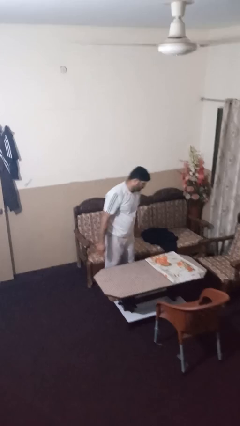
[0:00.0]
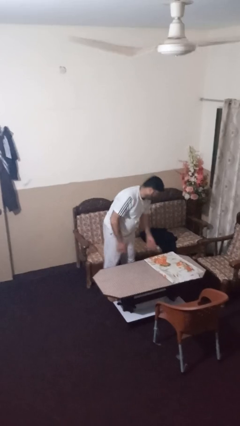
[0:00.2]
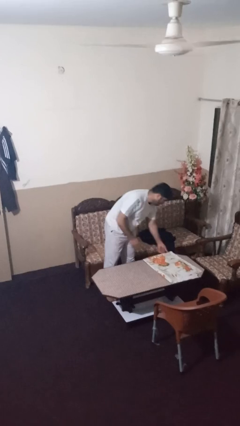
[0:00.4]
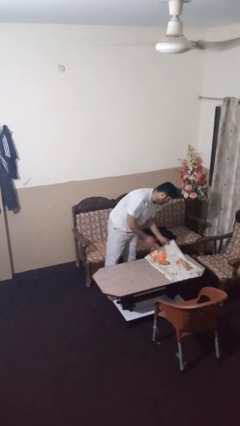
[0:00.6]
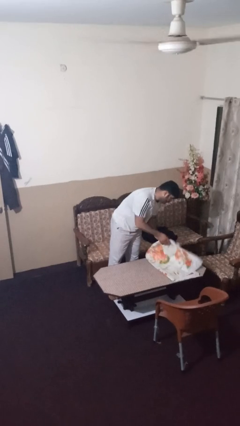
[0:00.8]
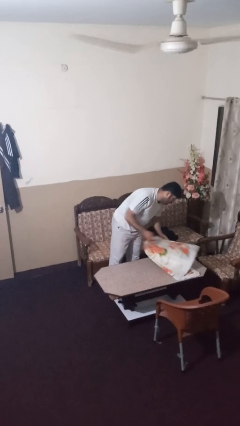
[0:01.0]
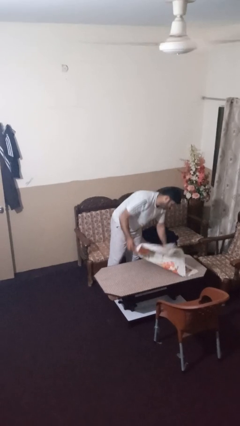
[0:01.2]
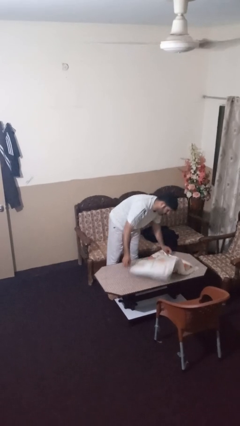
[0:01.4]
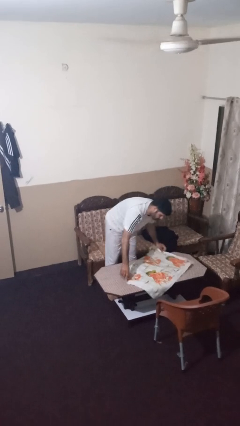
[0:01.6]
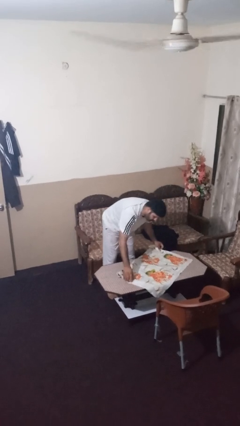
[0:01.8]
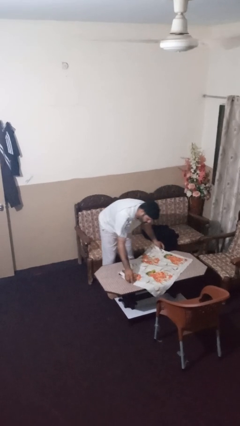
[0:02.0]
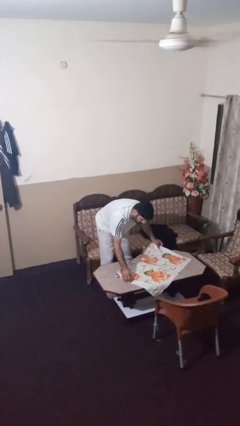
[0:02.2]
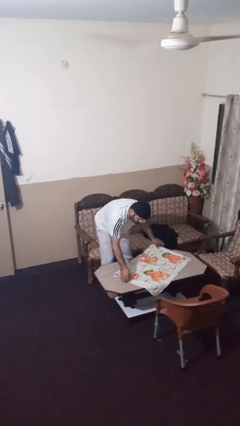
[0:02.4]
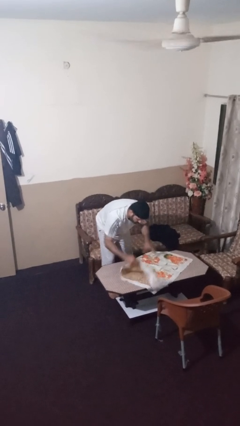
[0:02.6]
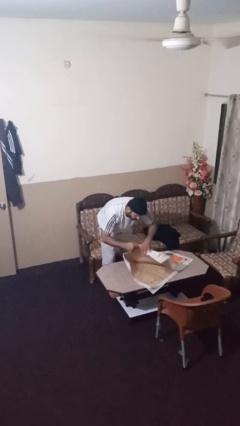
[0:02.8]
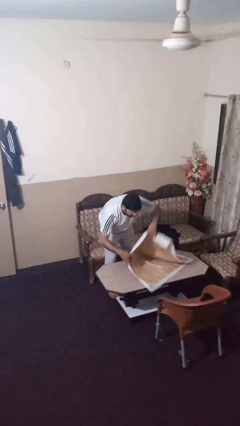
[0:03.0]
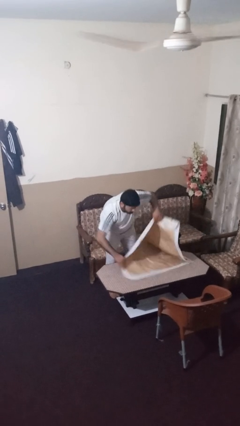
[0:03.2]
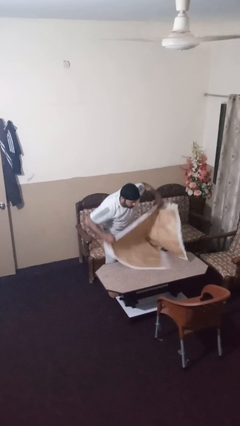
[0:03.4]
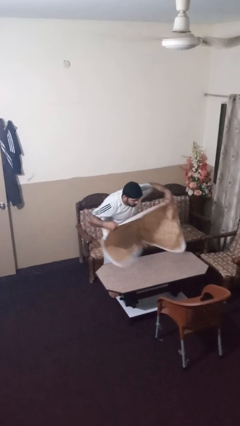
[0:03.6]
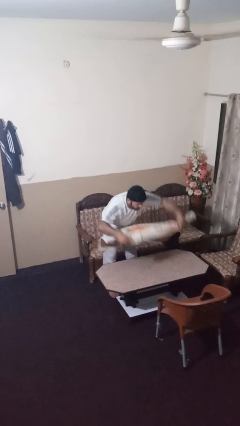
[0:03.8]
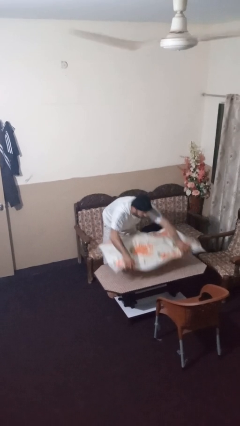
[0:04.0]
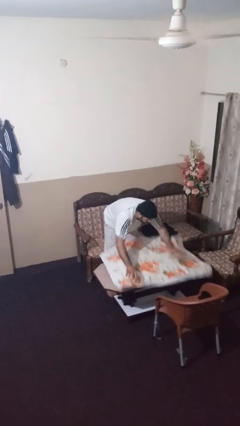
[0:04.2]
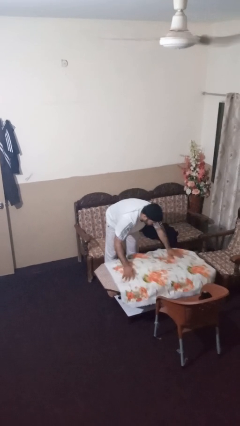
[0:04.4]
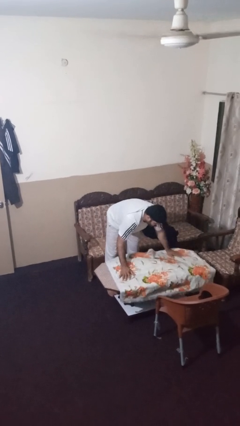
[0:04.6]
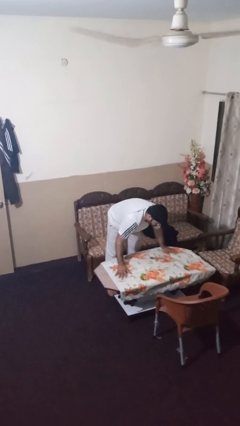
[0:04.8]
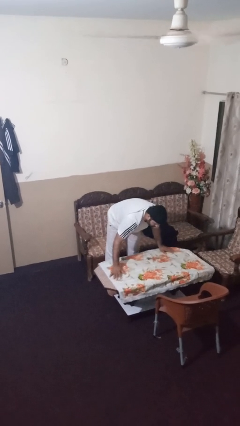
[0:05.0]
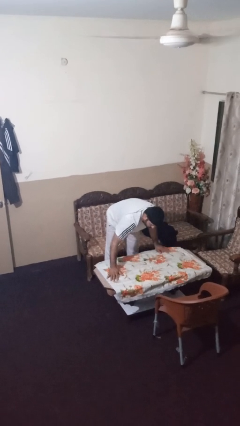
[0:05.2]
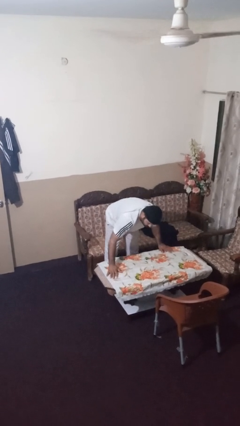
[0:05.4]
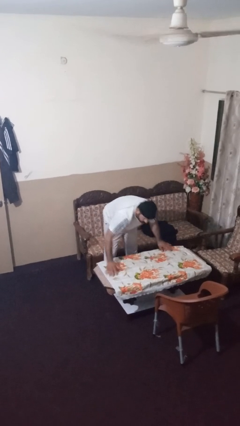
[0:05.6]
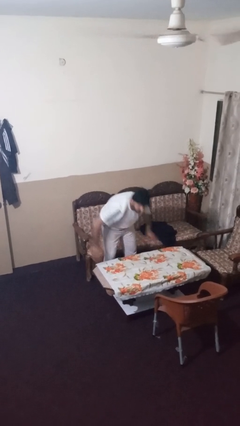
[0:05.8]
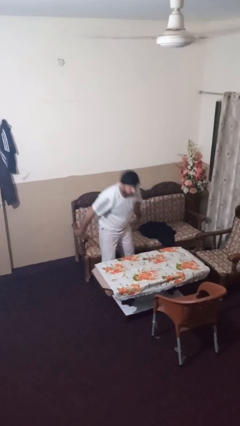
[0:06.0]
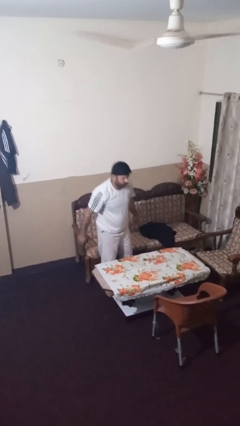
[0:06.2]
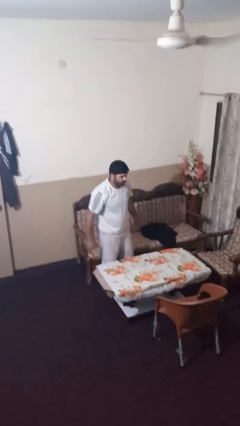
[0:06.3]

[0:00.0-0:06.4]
person spreads tablecloth

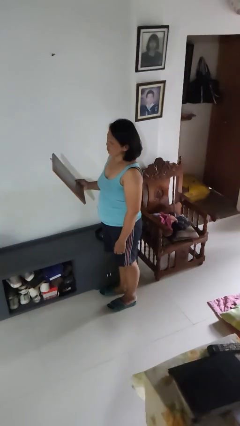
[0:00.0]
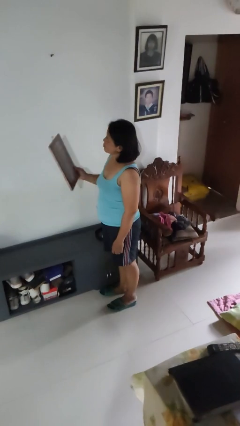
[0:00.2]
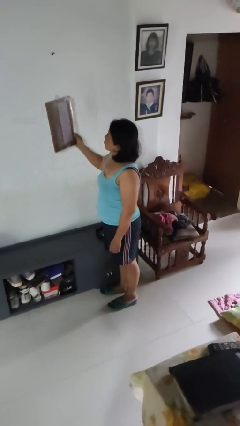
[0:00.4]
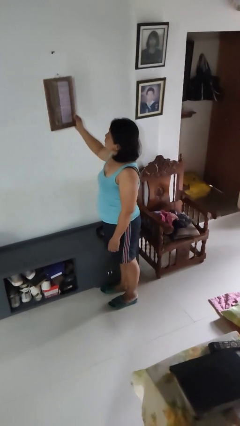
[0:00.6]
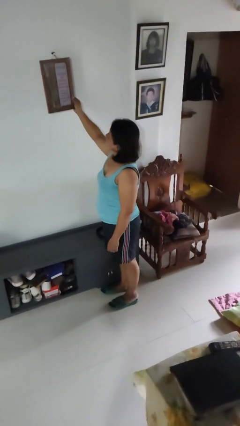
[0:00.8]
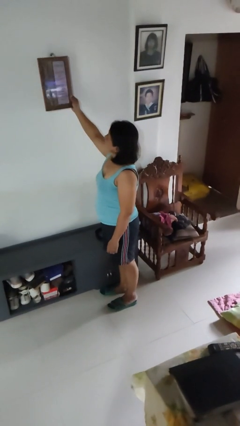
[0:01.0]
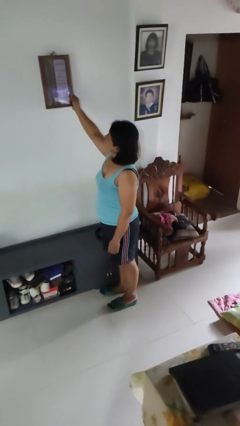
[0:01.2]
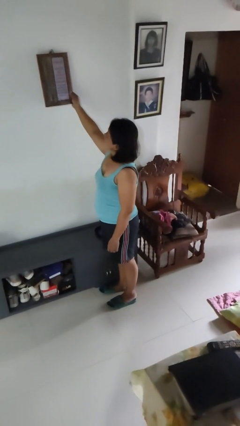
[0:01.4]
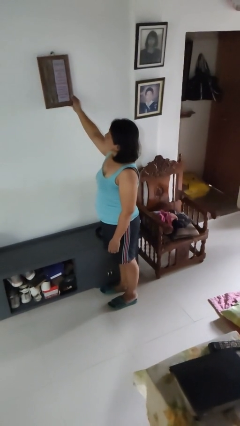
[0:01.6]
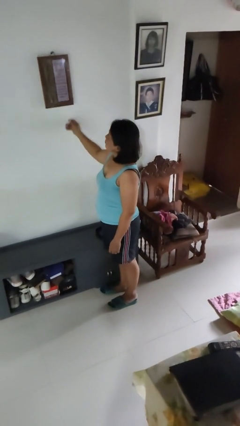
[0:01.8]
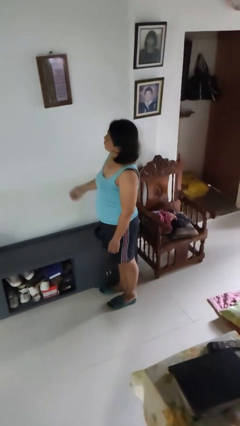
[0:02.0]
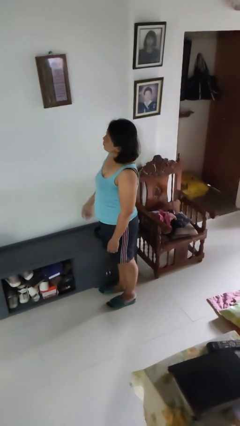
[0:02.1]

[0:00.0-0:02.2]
person puts up picture frame

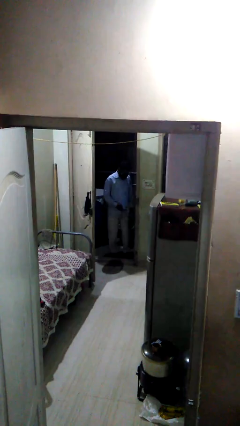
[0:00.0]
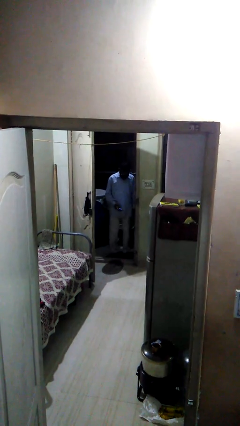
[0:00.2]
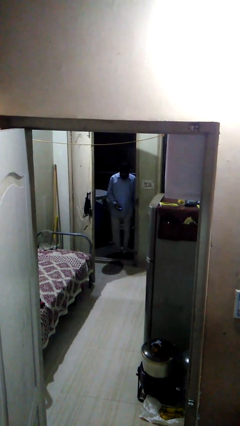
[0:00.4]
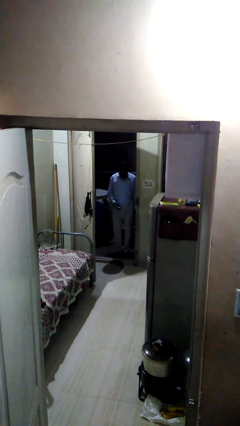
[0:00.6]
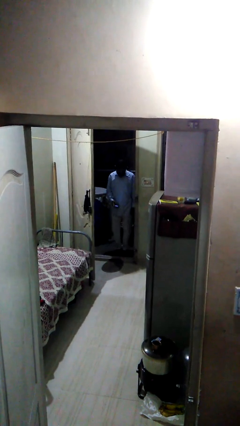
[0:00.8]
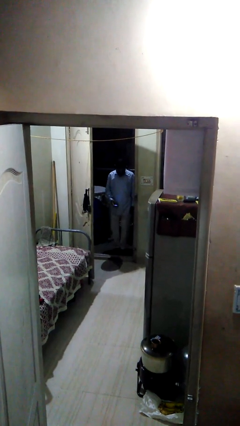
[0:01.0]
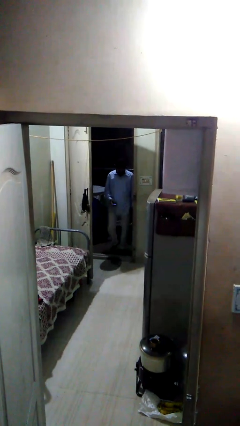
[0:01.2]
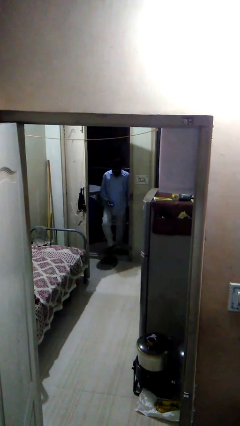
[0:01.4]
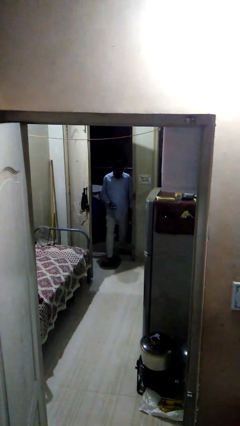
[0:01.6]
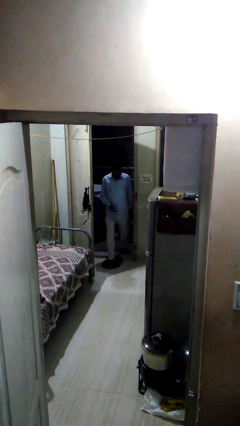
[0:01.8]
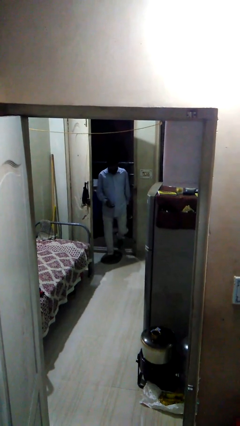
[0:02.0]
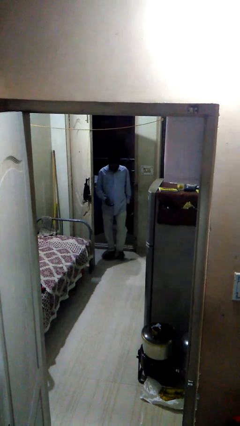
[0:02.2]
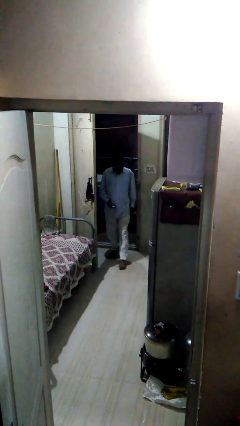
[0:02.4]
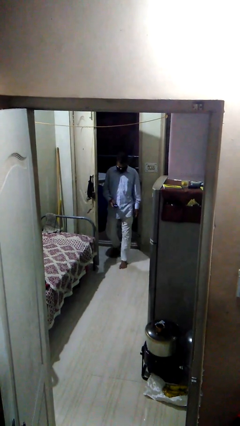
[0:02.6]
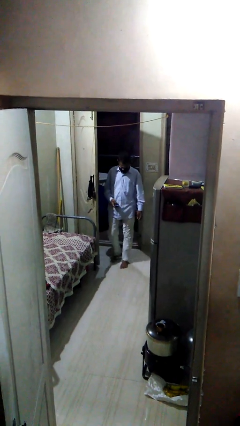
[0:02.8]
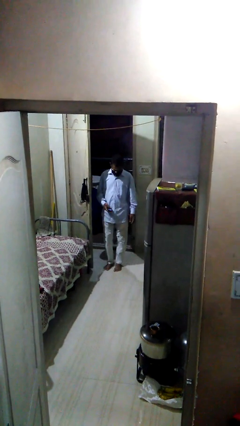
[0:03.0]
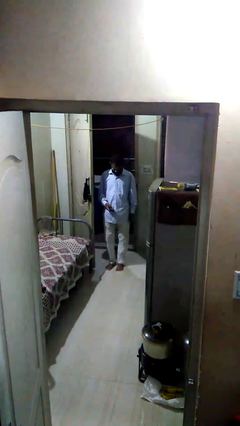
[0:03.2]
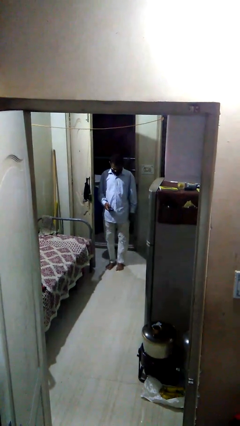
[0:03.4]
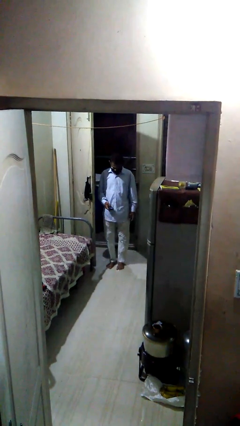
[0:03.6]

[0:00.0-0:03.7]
person enters scene through structure

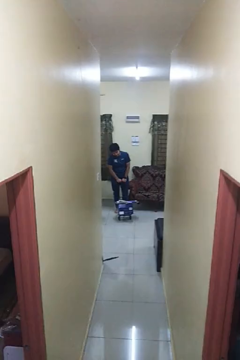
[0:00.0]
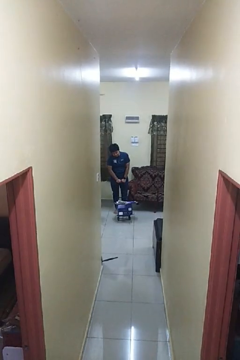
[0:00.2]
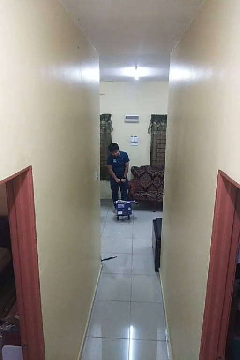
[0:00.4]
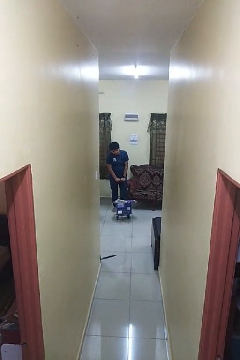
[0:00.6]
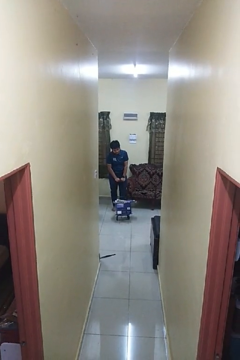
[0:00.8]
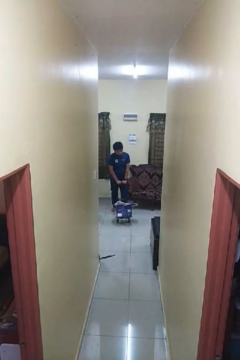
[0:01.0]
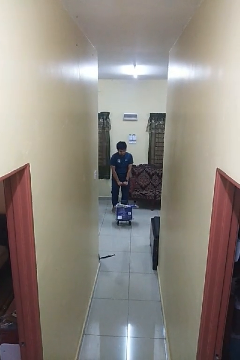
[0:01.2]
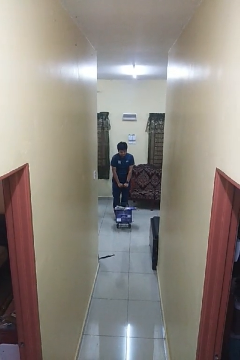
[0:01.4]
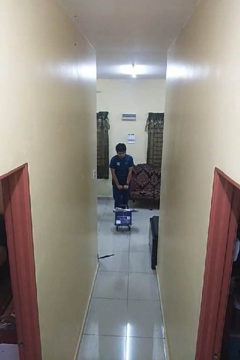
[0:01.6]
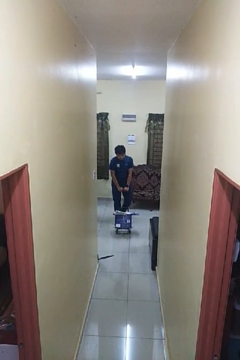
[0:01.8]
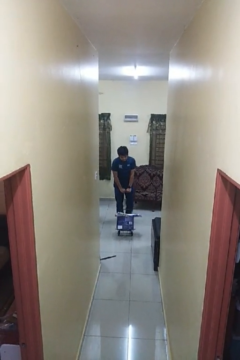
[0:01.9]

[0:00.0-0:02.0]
person pushes wheeled cart

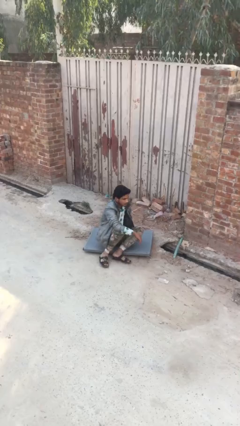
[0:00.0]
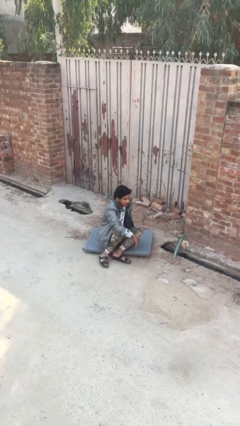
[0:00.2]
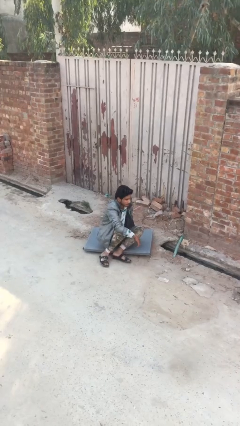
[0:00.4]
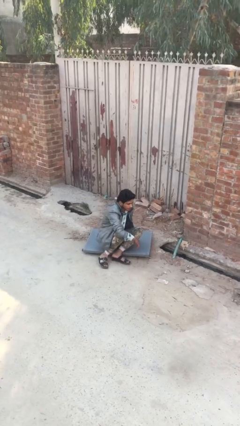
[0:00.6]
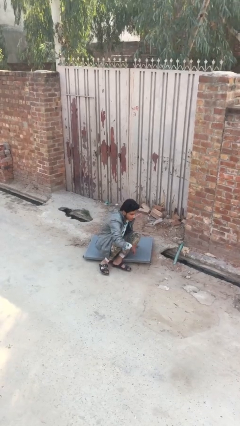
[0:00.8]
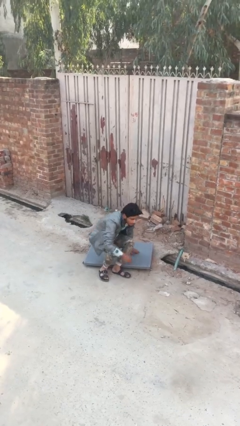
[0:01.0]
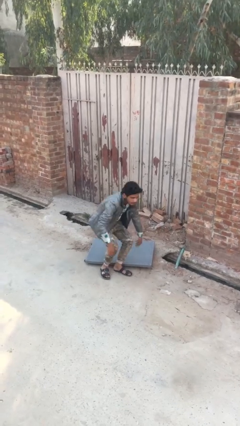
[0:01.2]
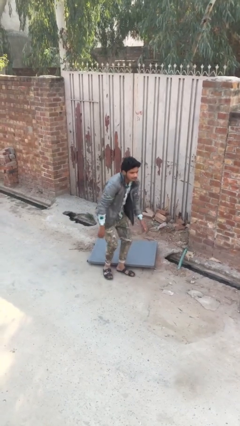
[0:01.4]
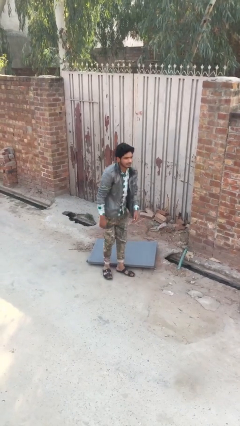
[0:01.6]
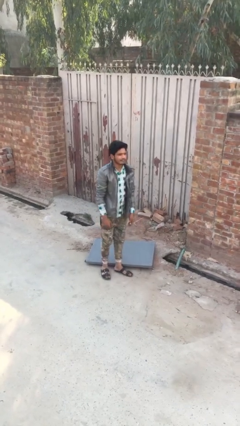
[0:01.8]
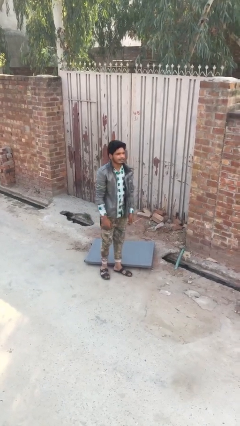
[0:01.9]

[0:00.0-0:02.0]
person stands up

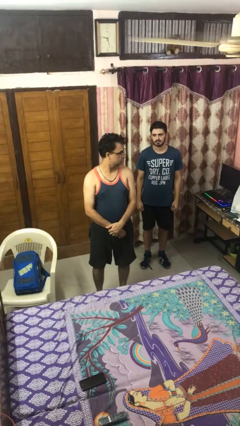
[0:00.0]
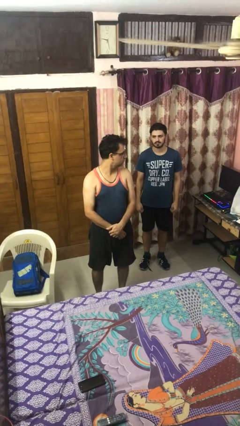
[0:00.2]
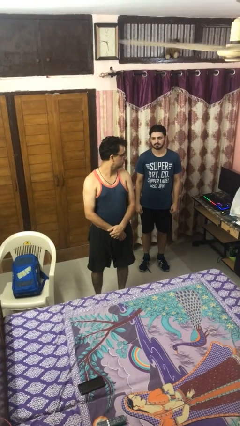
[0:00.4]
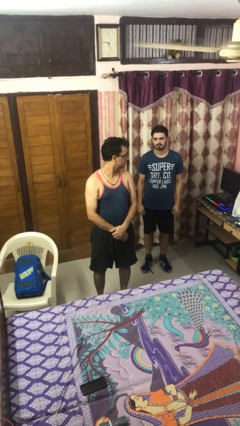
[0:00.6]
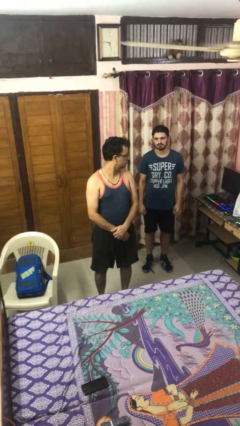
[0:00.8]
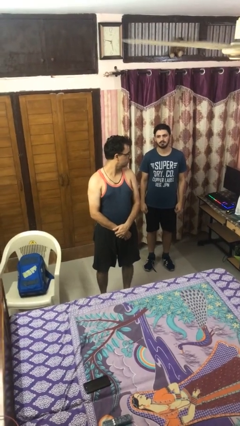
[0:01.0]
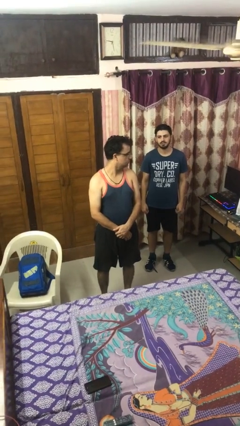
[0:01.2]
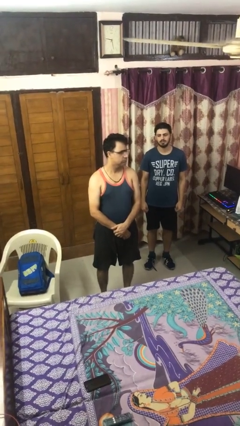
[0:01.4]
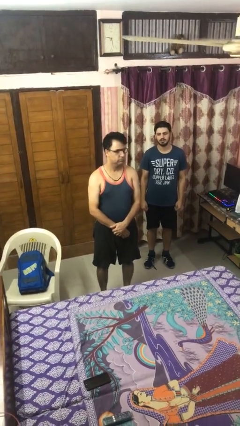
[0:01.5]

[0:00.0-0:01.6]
person looks over shoulder
